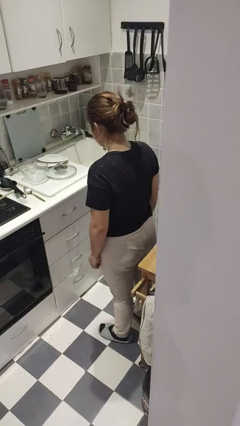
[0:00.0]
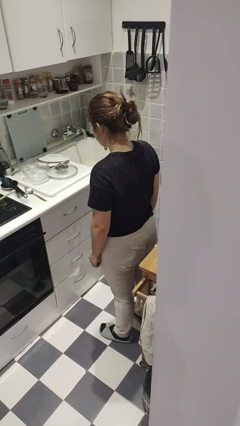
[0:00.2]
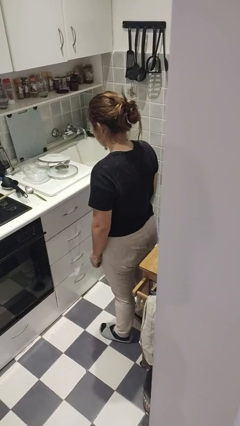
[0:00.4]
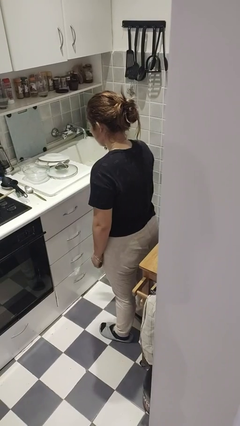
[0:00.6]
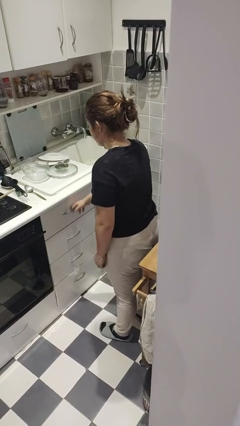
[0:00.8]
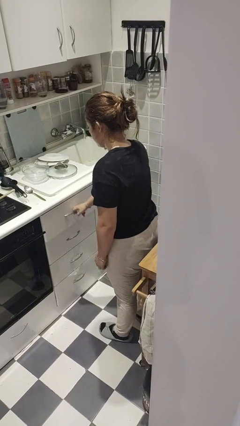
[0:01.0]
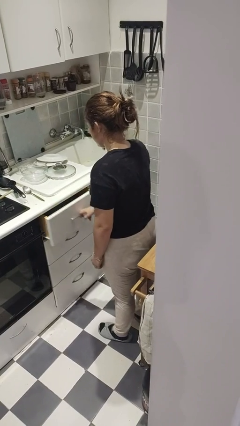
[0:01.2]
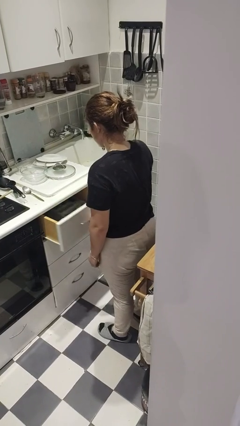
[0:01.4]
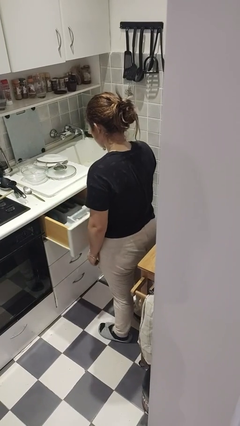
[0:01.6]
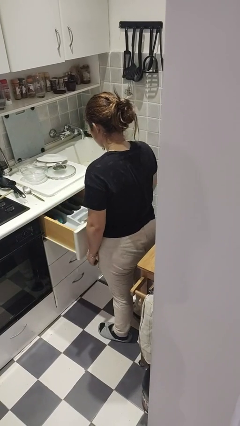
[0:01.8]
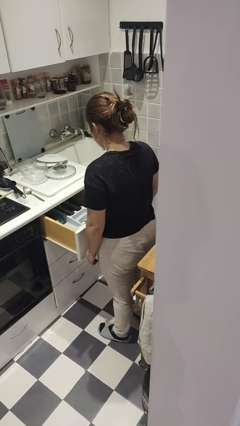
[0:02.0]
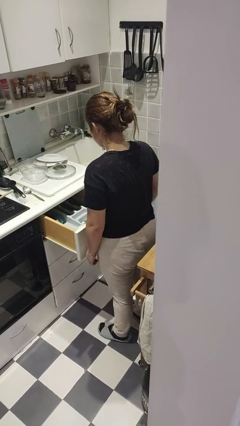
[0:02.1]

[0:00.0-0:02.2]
person opens kitchen drawer

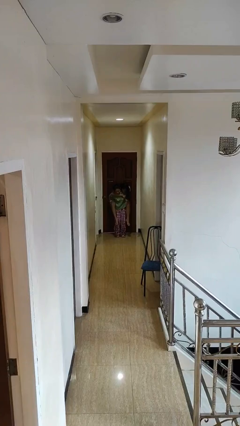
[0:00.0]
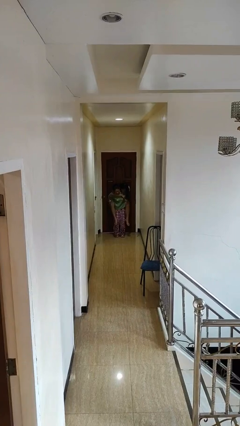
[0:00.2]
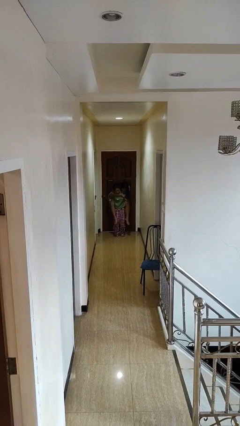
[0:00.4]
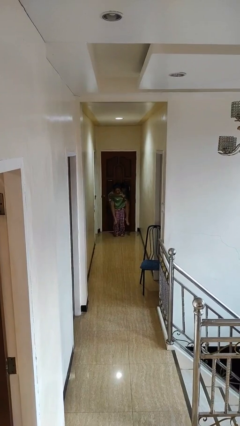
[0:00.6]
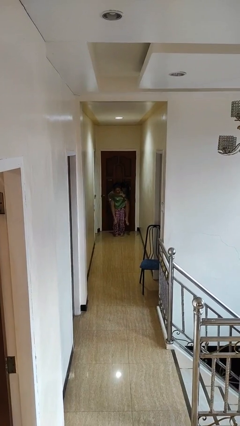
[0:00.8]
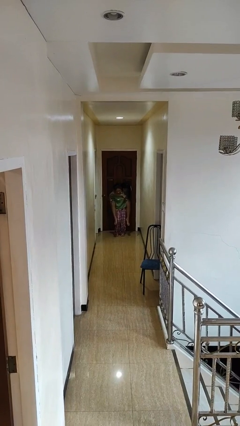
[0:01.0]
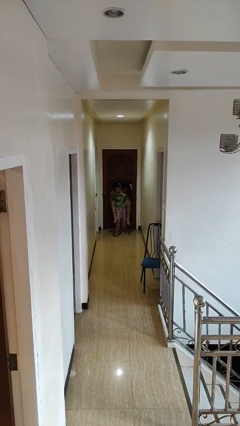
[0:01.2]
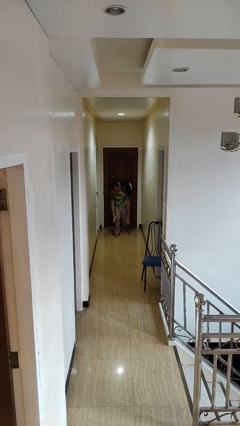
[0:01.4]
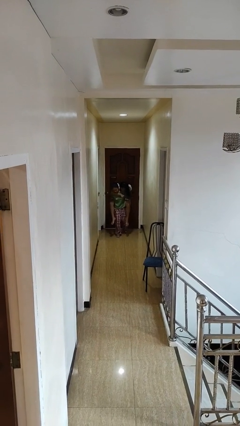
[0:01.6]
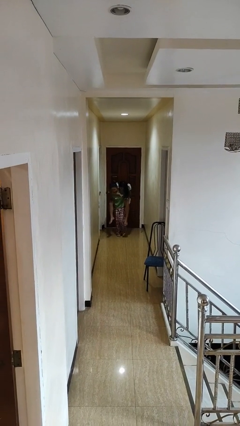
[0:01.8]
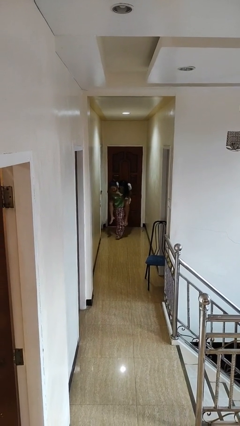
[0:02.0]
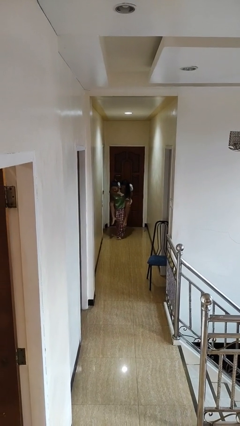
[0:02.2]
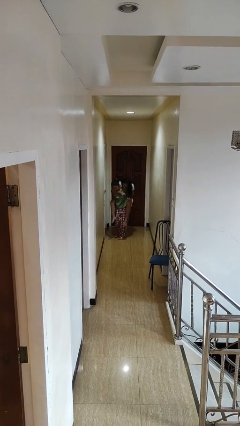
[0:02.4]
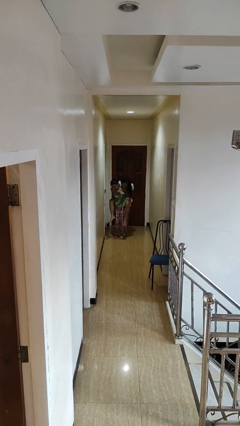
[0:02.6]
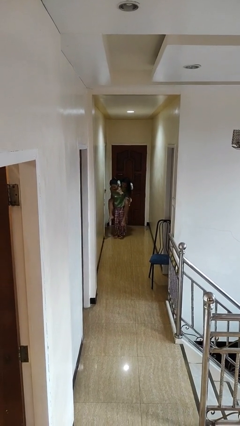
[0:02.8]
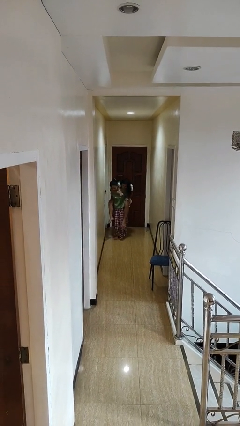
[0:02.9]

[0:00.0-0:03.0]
person carries person on back

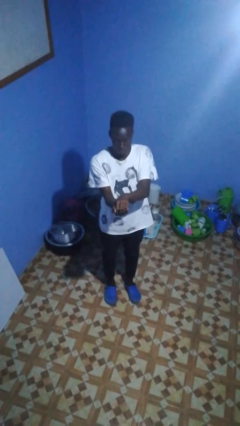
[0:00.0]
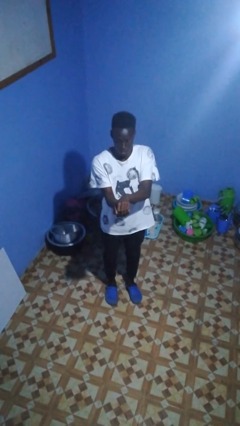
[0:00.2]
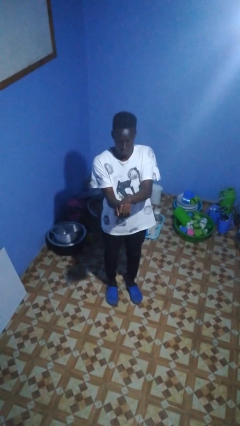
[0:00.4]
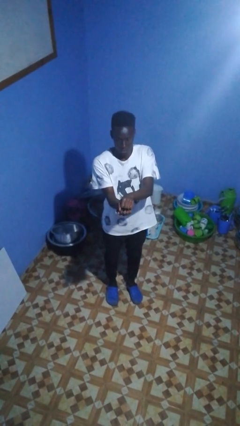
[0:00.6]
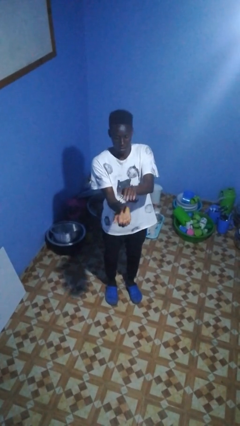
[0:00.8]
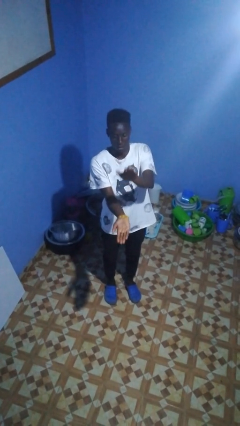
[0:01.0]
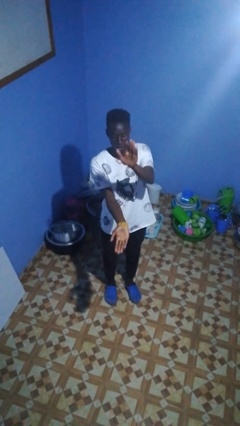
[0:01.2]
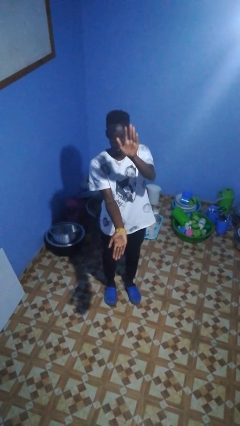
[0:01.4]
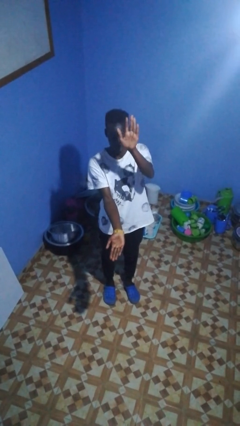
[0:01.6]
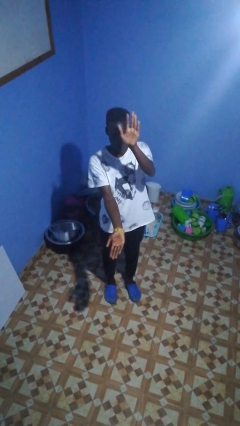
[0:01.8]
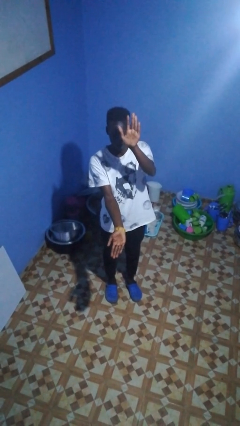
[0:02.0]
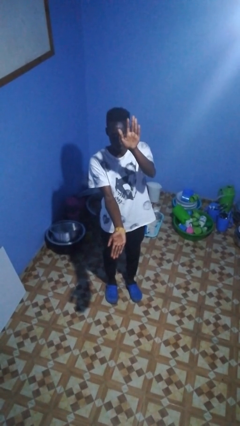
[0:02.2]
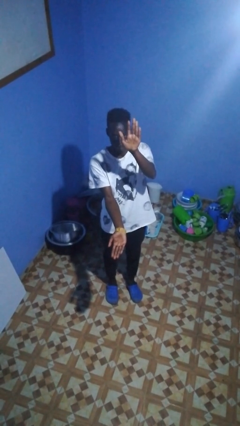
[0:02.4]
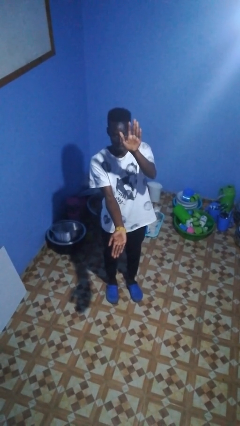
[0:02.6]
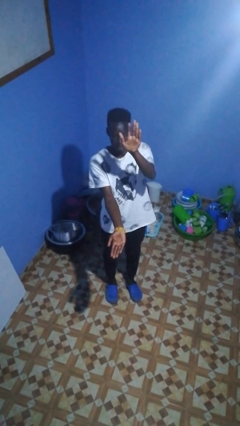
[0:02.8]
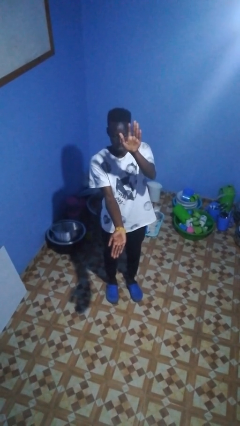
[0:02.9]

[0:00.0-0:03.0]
person gestures zoom in

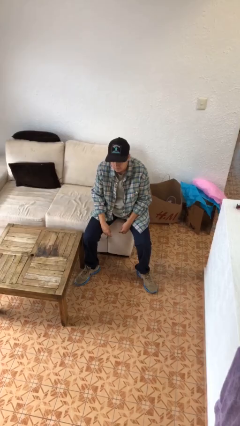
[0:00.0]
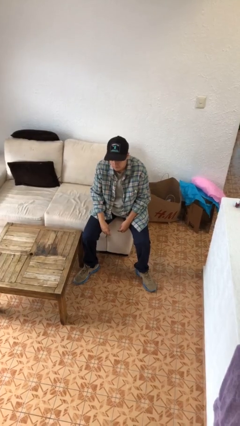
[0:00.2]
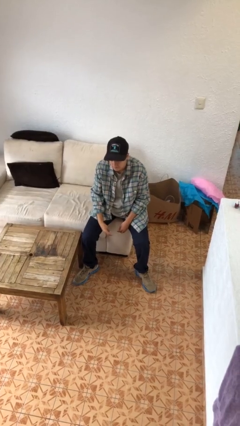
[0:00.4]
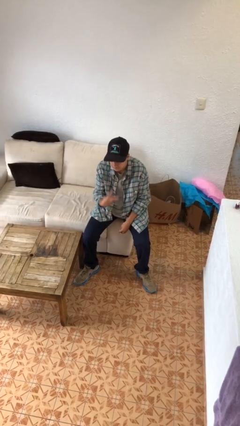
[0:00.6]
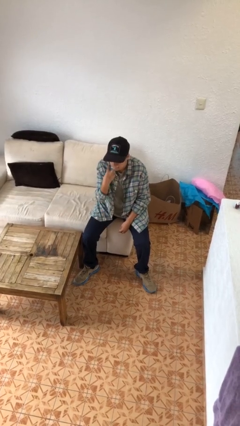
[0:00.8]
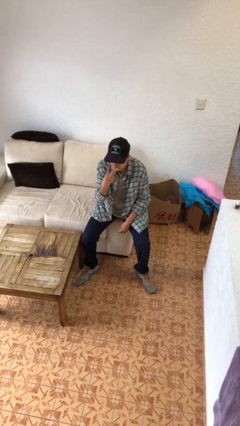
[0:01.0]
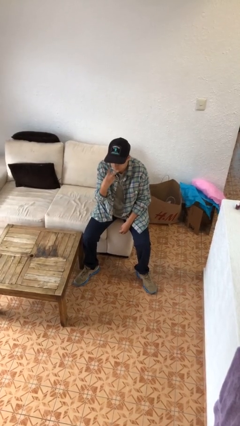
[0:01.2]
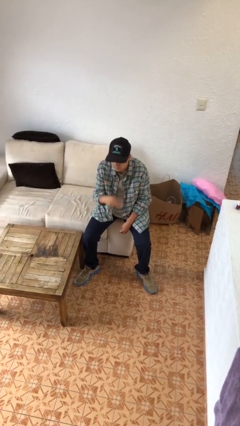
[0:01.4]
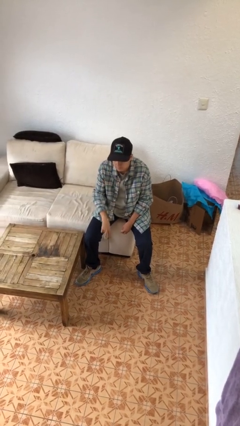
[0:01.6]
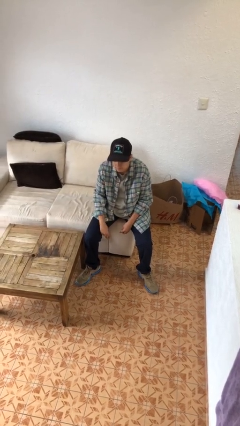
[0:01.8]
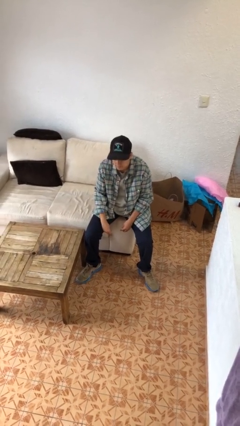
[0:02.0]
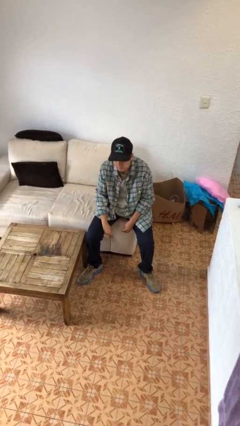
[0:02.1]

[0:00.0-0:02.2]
person gestures watch closely

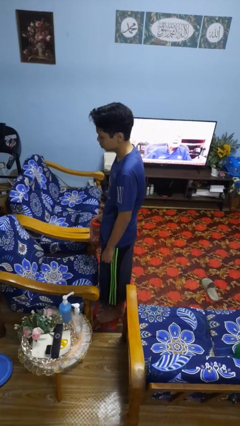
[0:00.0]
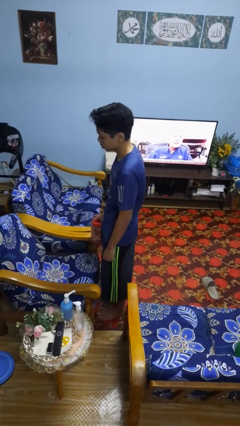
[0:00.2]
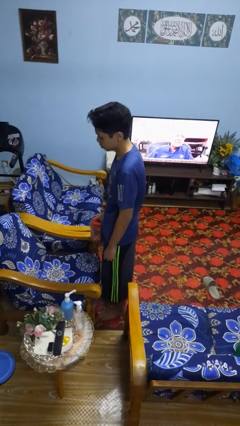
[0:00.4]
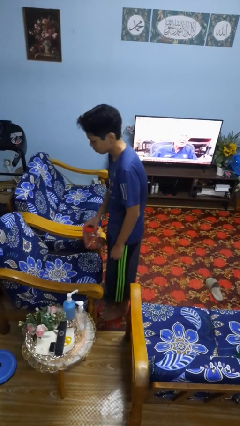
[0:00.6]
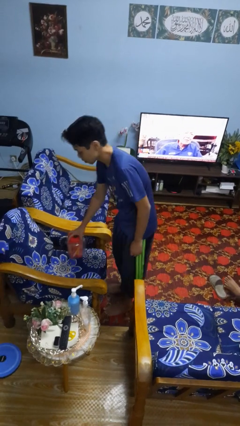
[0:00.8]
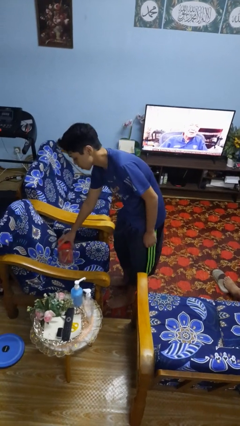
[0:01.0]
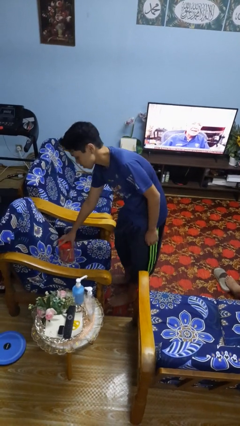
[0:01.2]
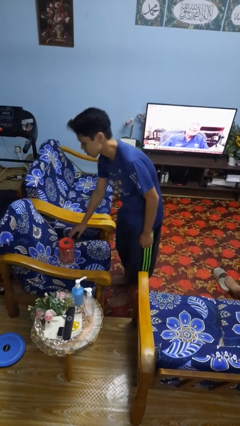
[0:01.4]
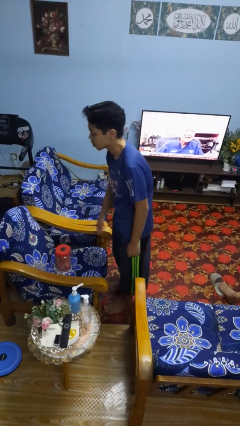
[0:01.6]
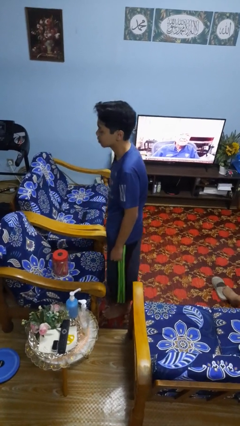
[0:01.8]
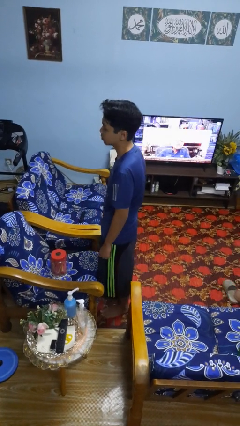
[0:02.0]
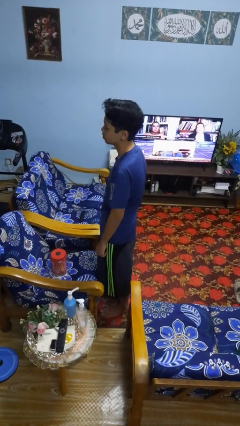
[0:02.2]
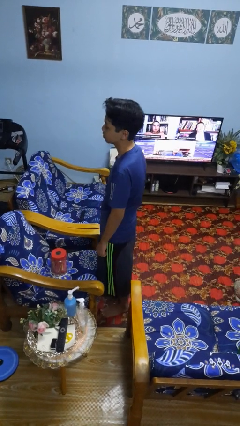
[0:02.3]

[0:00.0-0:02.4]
person puts down object on couch

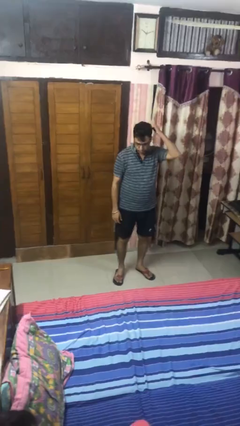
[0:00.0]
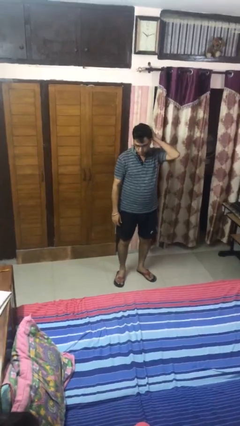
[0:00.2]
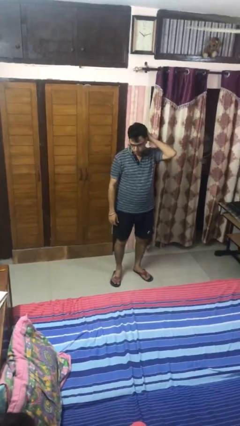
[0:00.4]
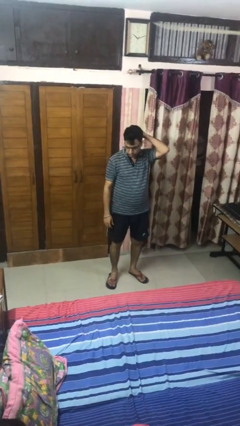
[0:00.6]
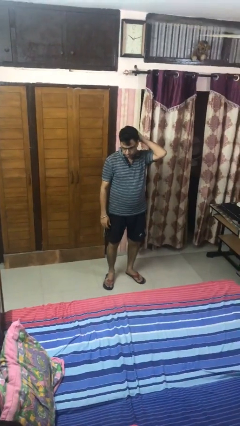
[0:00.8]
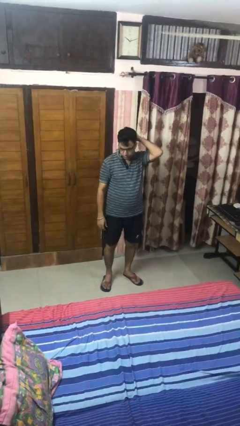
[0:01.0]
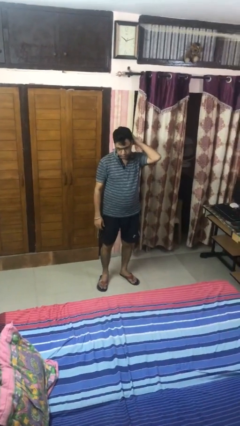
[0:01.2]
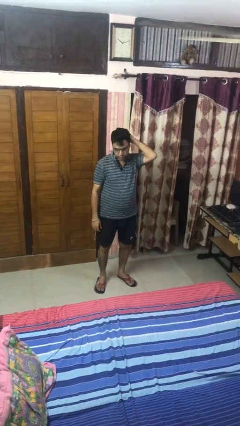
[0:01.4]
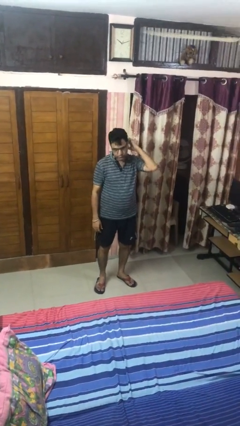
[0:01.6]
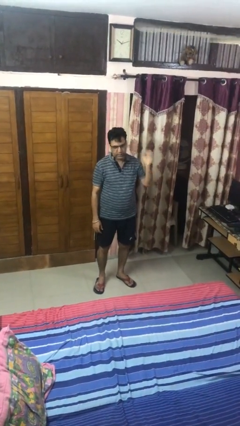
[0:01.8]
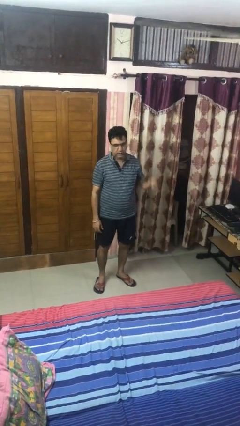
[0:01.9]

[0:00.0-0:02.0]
person scratches face

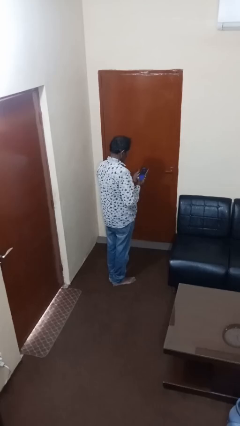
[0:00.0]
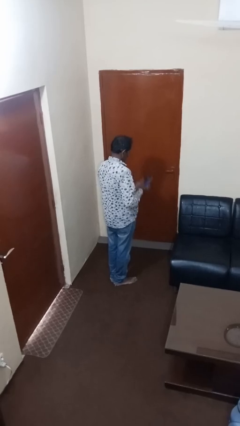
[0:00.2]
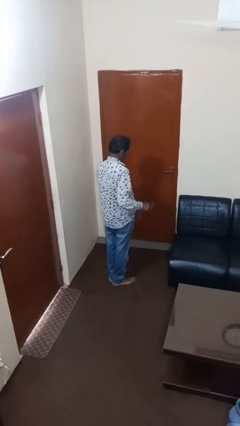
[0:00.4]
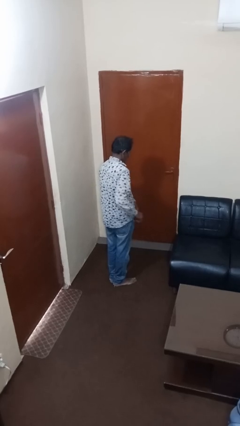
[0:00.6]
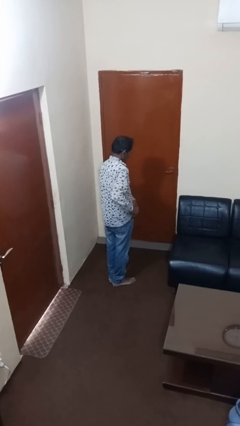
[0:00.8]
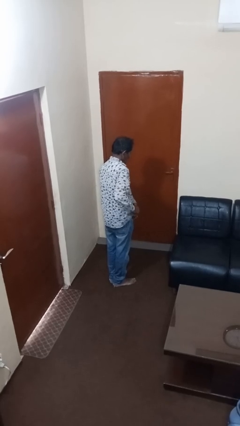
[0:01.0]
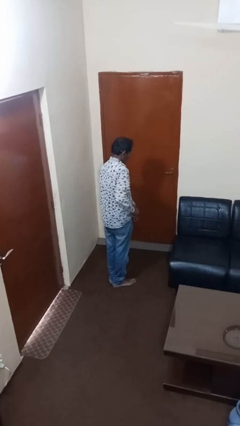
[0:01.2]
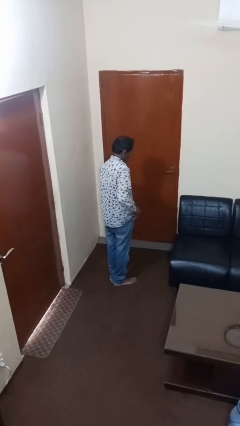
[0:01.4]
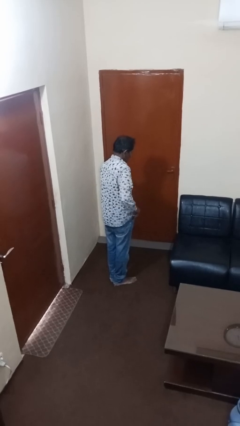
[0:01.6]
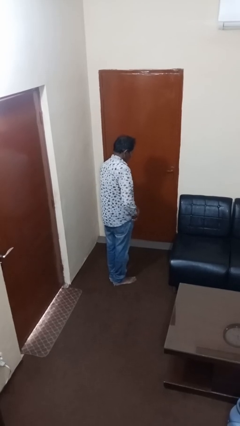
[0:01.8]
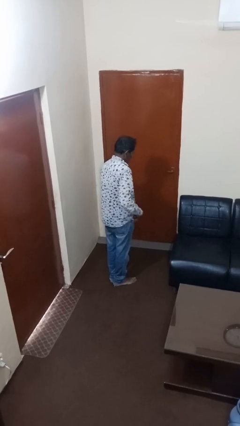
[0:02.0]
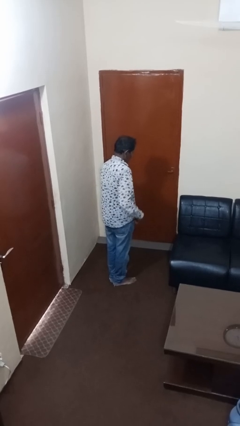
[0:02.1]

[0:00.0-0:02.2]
person puts phone into pocket
